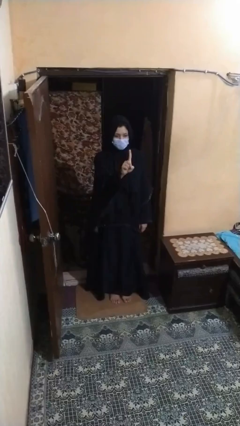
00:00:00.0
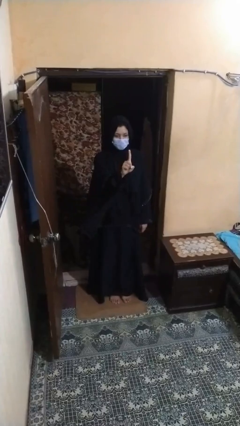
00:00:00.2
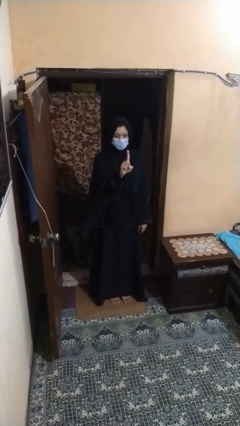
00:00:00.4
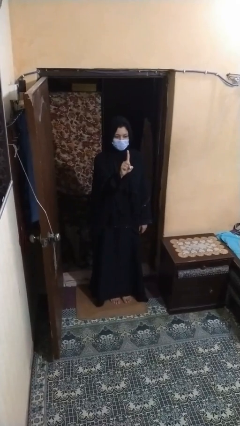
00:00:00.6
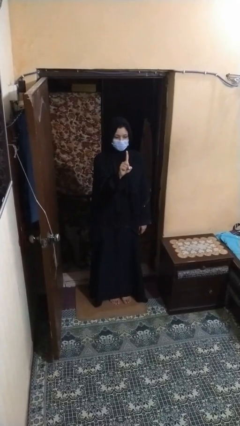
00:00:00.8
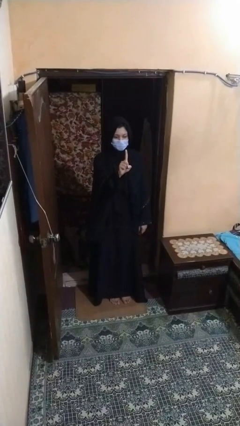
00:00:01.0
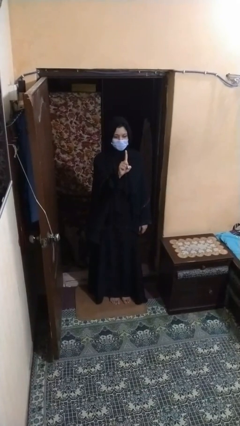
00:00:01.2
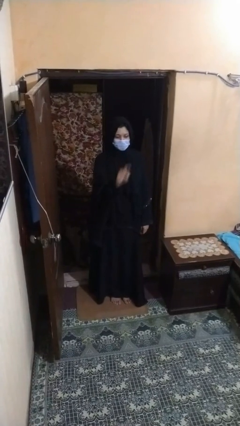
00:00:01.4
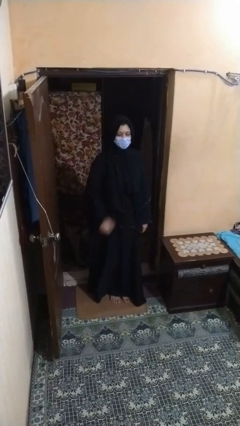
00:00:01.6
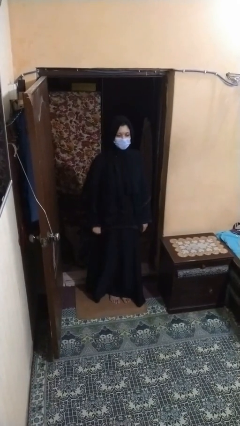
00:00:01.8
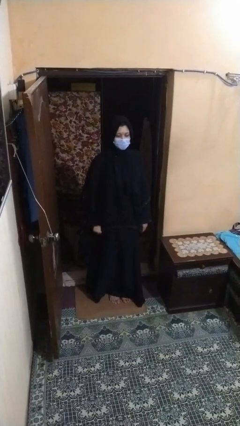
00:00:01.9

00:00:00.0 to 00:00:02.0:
person gestures number one

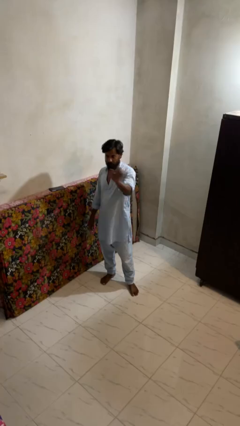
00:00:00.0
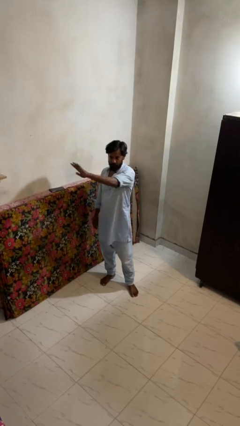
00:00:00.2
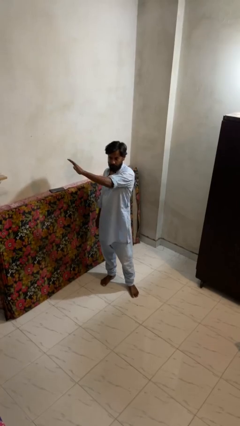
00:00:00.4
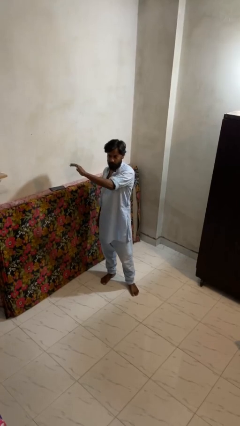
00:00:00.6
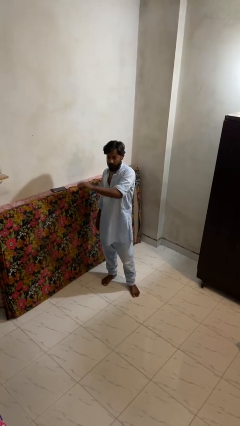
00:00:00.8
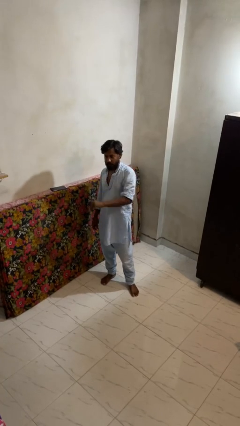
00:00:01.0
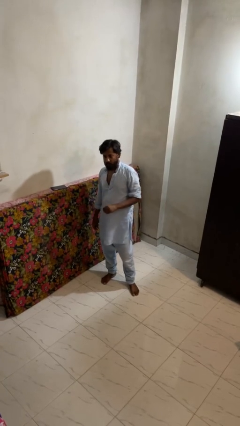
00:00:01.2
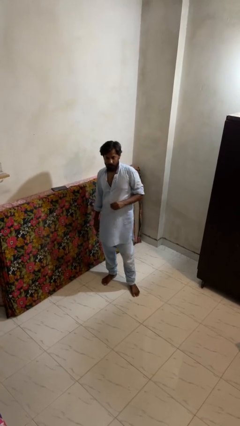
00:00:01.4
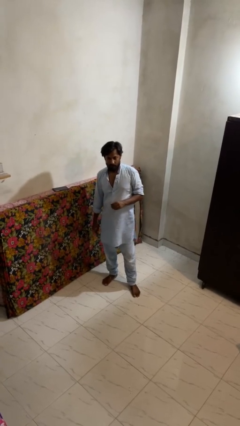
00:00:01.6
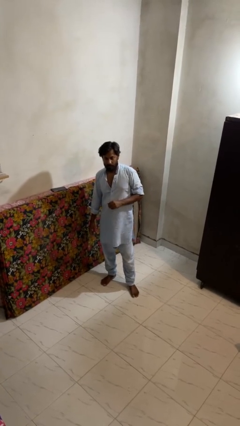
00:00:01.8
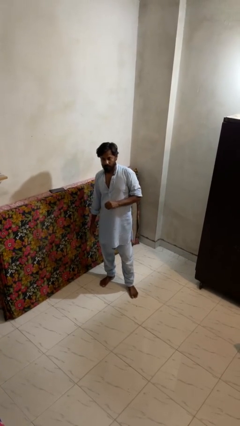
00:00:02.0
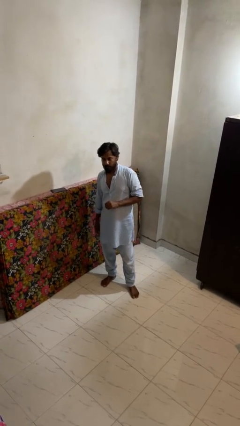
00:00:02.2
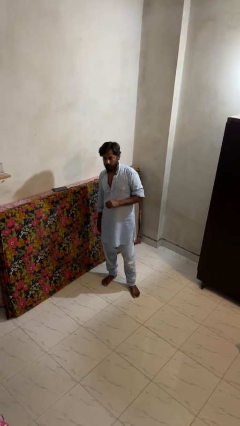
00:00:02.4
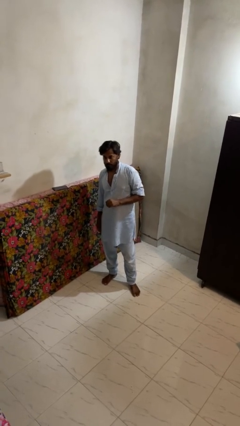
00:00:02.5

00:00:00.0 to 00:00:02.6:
person gestures swipe right

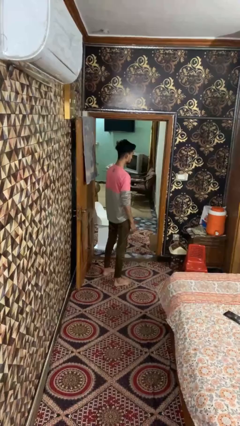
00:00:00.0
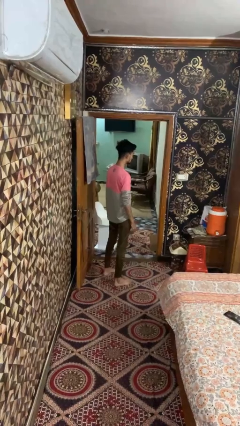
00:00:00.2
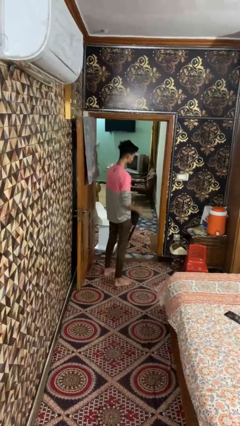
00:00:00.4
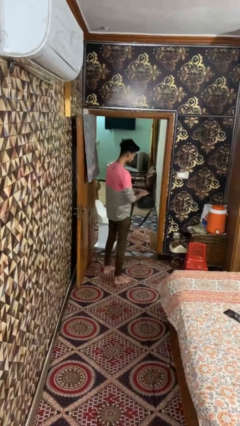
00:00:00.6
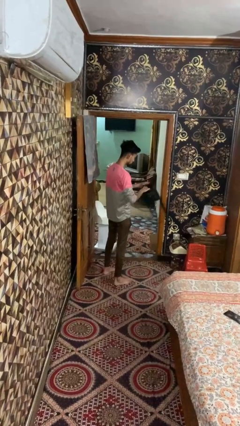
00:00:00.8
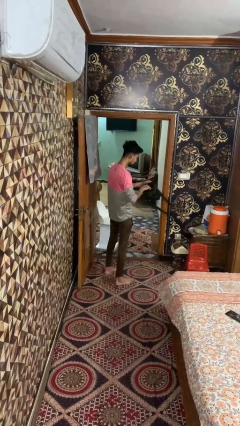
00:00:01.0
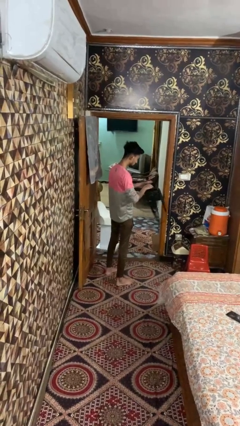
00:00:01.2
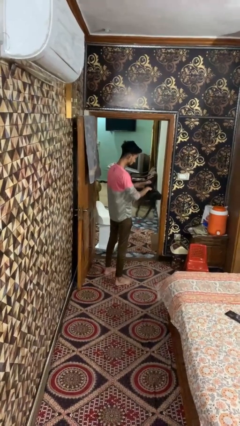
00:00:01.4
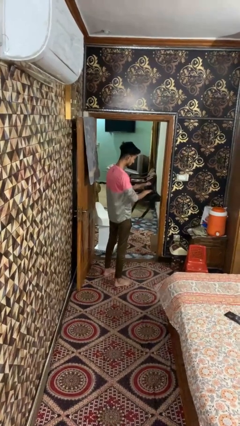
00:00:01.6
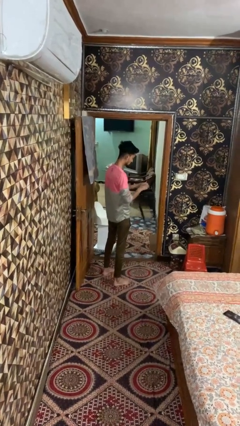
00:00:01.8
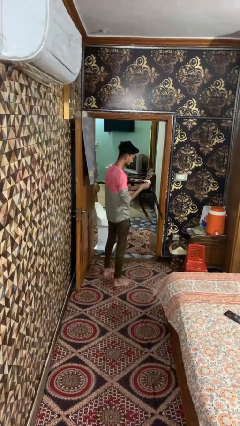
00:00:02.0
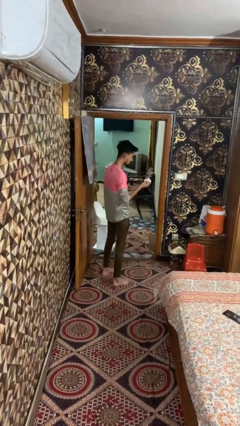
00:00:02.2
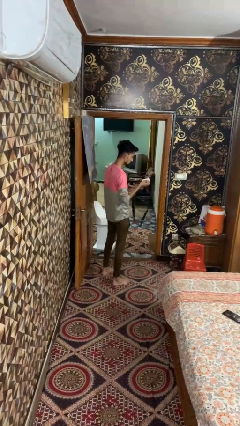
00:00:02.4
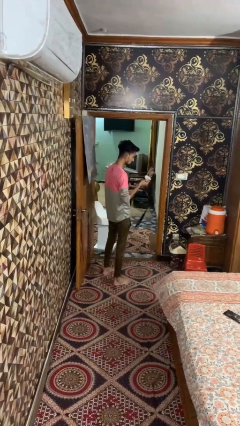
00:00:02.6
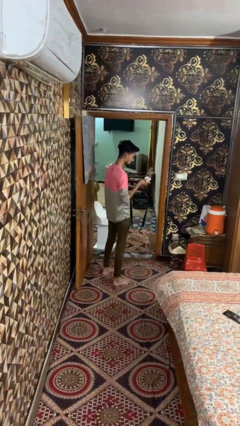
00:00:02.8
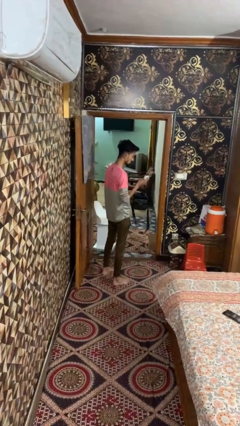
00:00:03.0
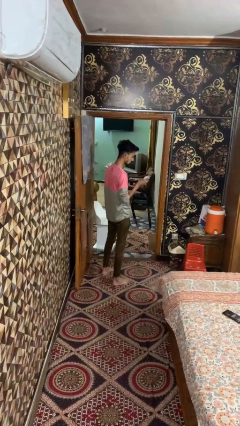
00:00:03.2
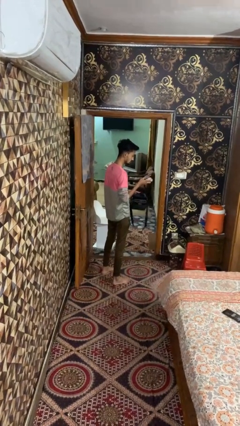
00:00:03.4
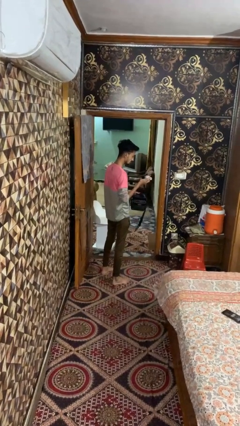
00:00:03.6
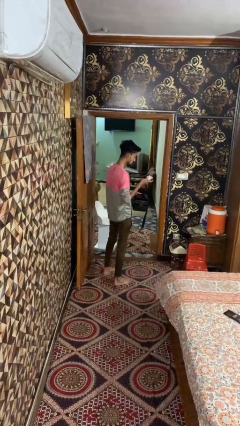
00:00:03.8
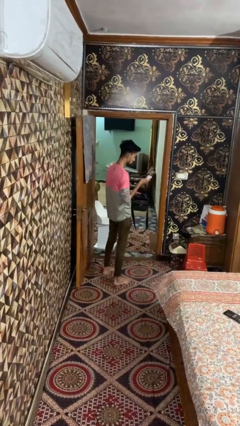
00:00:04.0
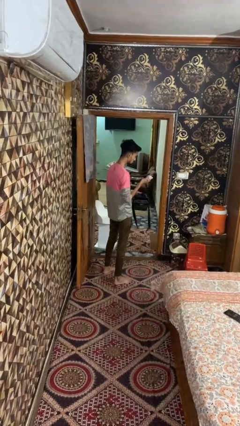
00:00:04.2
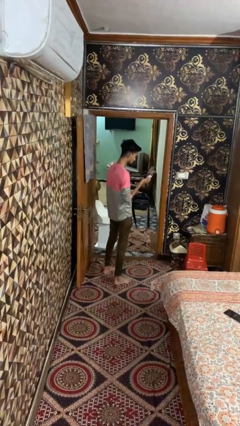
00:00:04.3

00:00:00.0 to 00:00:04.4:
person takes object from bag

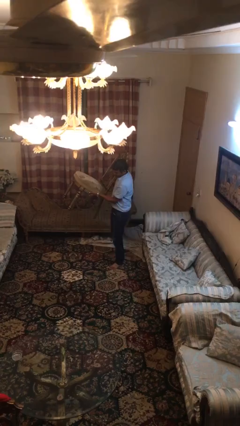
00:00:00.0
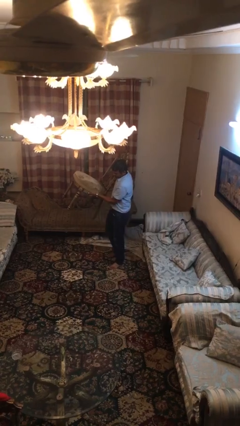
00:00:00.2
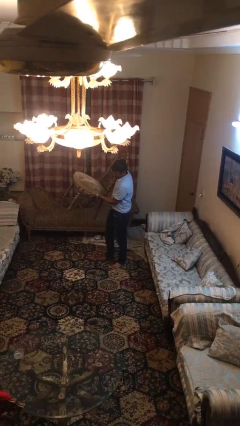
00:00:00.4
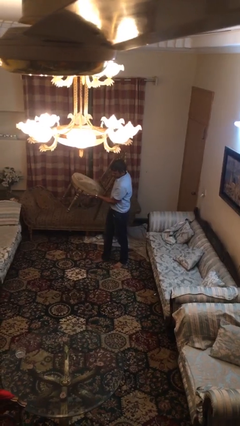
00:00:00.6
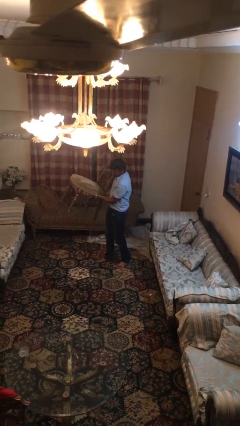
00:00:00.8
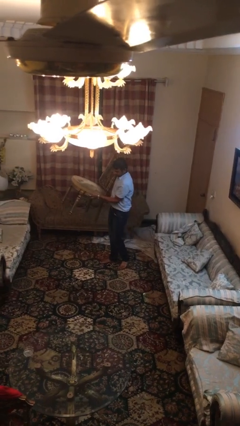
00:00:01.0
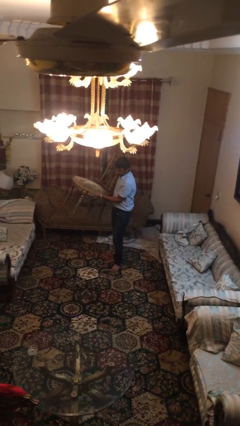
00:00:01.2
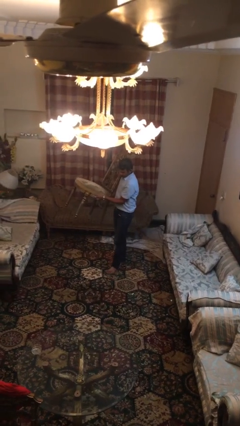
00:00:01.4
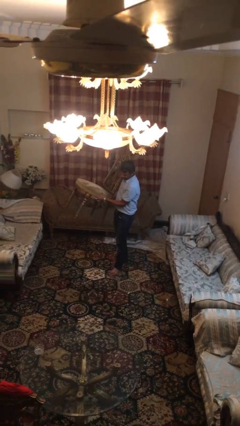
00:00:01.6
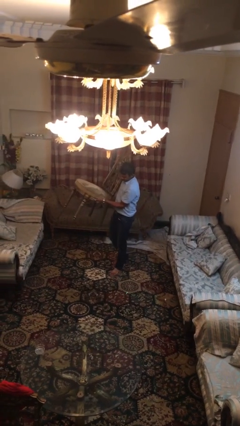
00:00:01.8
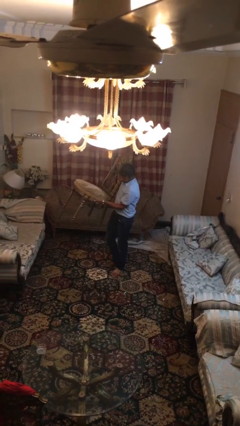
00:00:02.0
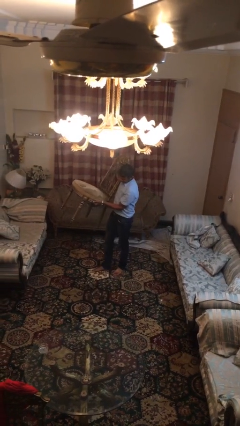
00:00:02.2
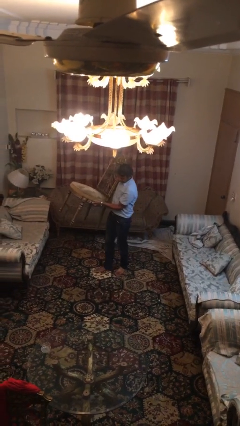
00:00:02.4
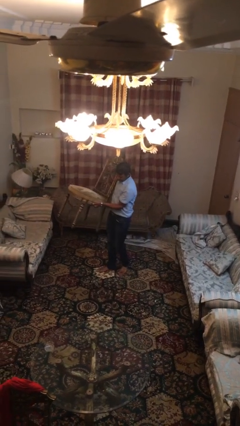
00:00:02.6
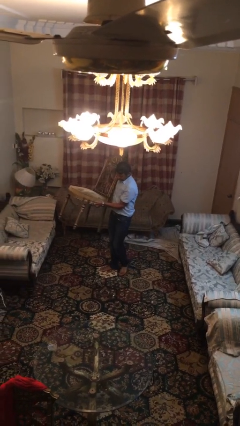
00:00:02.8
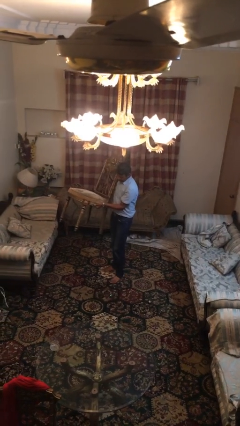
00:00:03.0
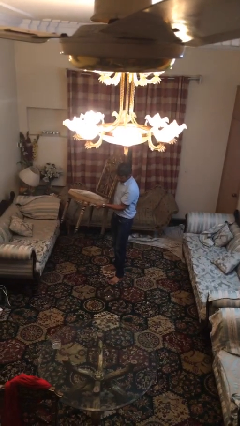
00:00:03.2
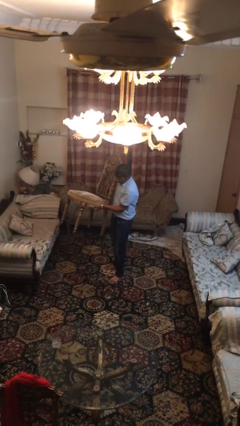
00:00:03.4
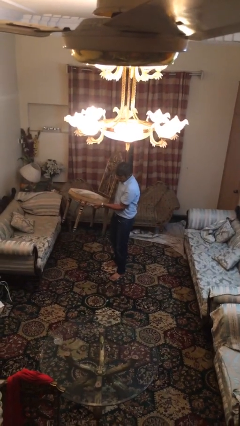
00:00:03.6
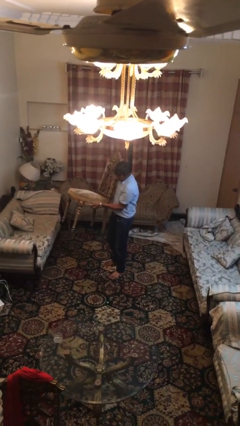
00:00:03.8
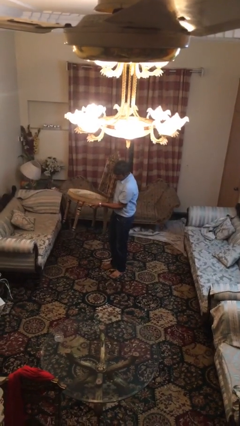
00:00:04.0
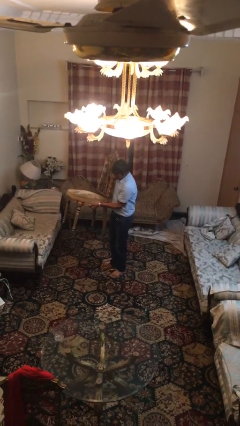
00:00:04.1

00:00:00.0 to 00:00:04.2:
person carries heavy object

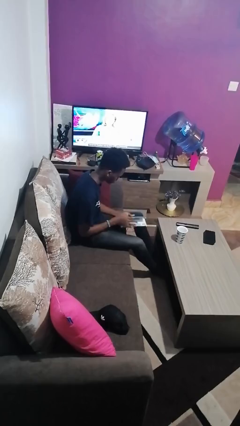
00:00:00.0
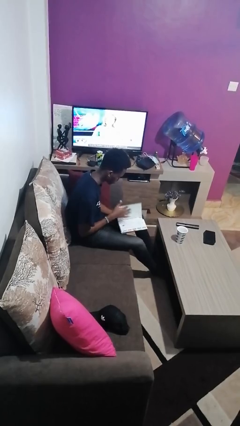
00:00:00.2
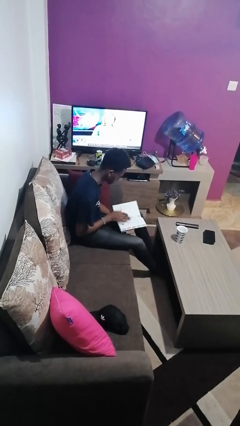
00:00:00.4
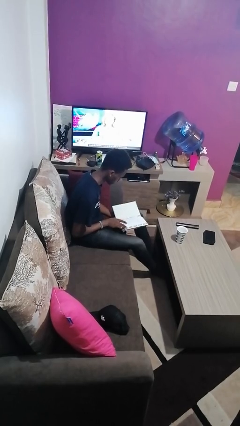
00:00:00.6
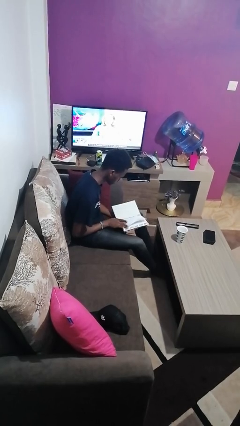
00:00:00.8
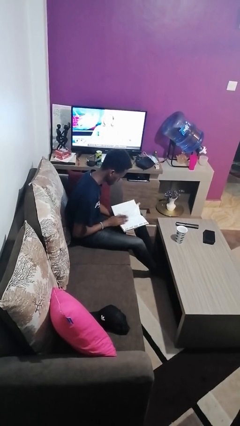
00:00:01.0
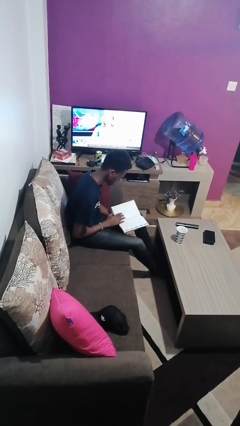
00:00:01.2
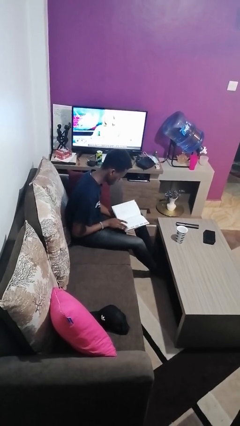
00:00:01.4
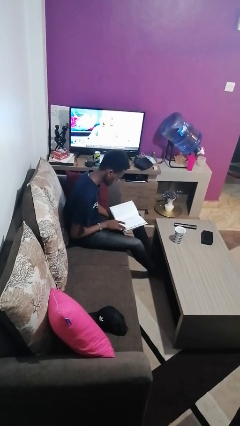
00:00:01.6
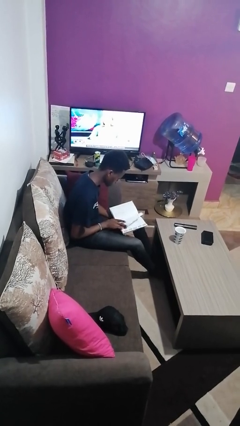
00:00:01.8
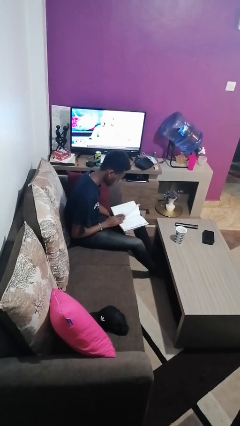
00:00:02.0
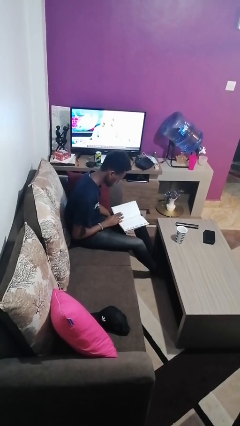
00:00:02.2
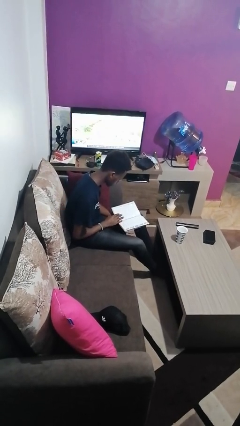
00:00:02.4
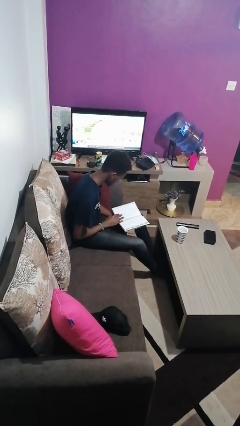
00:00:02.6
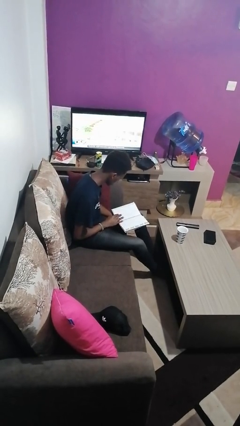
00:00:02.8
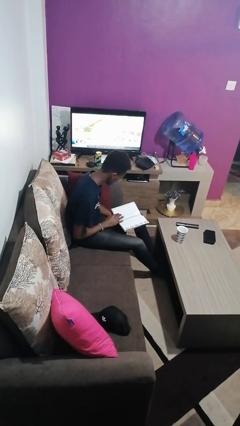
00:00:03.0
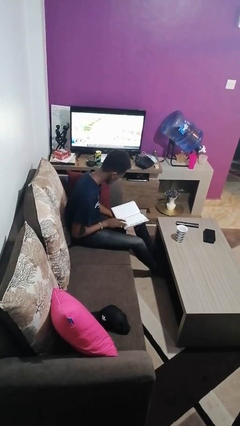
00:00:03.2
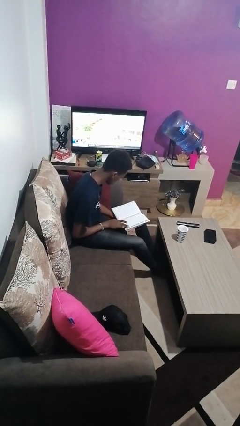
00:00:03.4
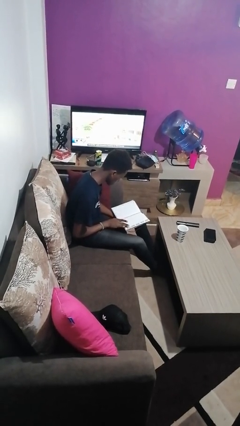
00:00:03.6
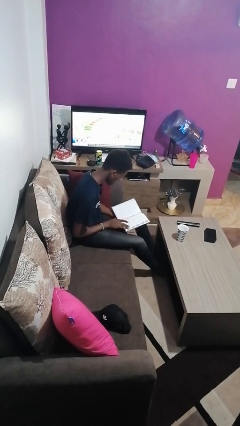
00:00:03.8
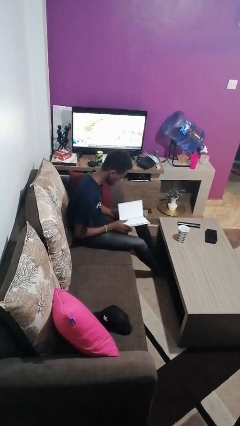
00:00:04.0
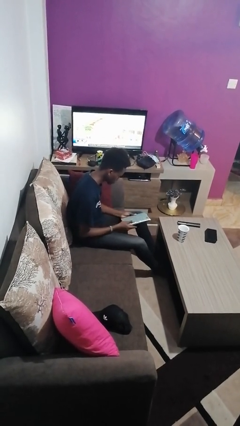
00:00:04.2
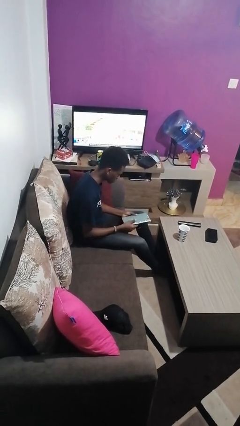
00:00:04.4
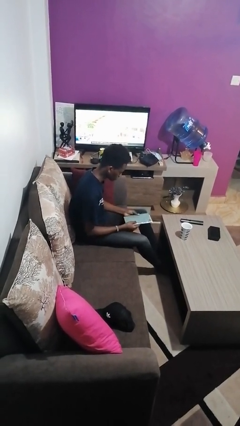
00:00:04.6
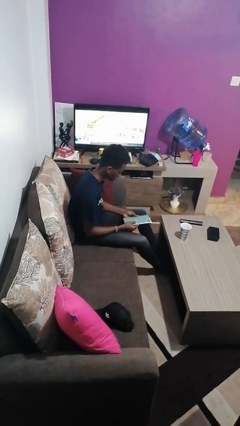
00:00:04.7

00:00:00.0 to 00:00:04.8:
person reads book
